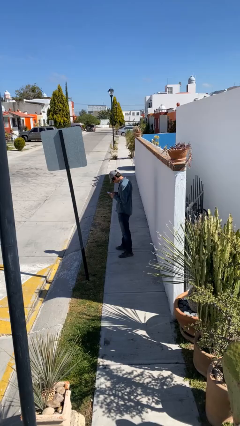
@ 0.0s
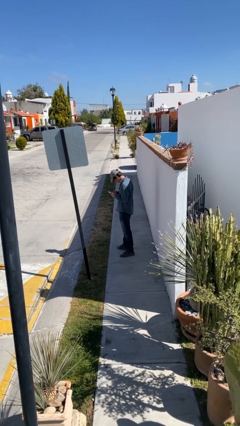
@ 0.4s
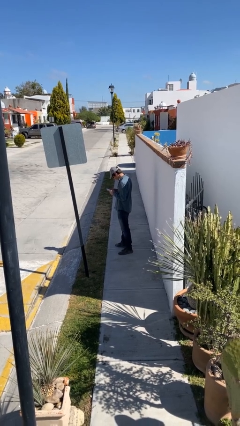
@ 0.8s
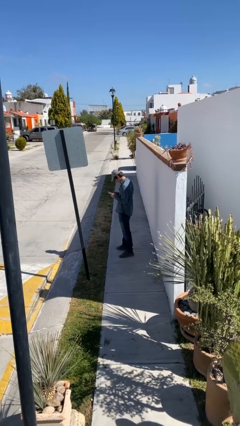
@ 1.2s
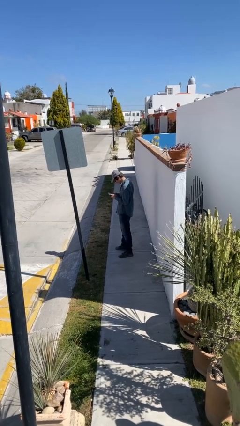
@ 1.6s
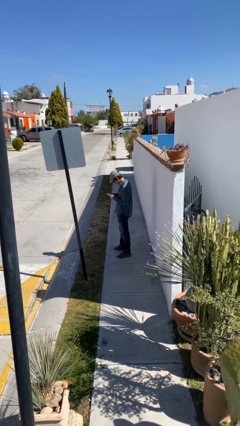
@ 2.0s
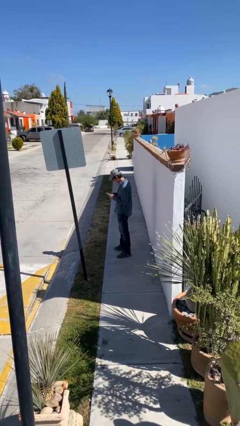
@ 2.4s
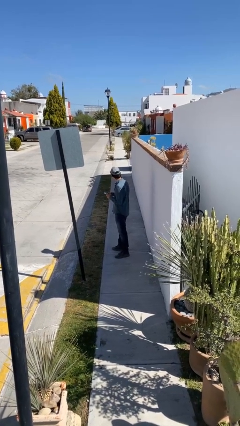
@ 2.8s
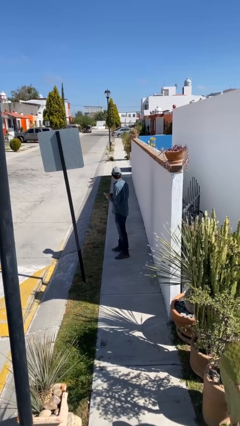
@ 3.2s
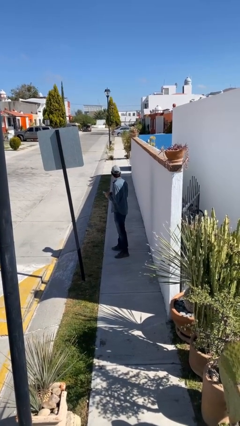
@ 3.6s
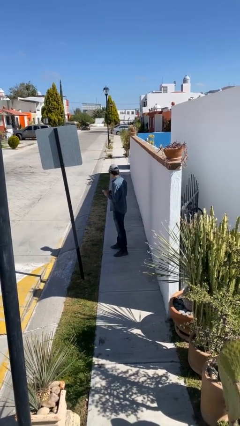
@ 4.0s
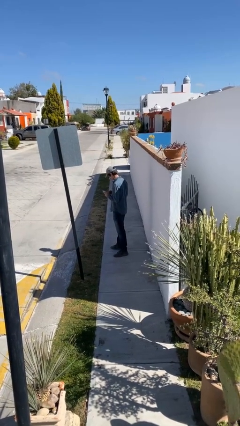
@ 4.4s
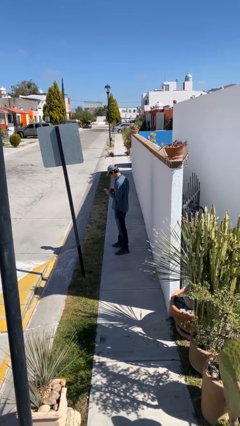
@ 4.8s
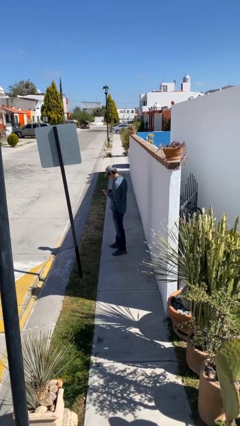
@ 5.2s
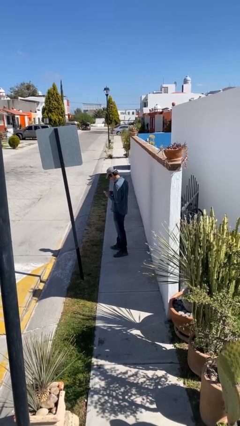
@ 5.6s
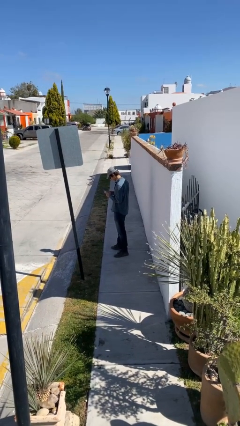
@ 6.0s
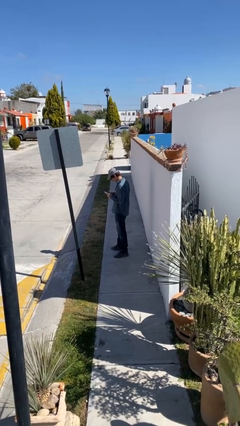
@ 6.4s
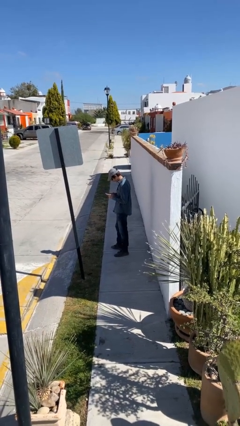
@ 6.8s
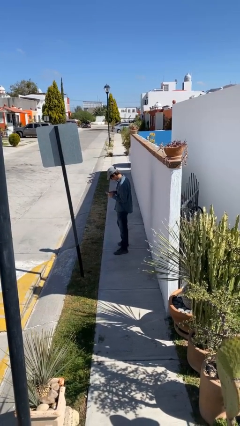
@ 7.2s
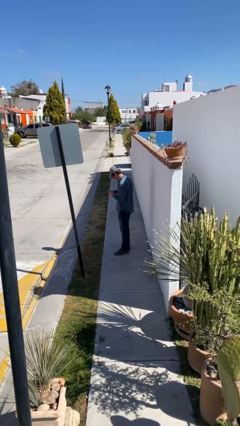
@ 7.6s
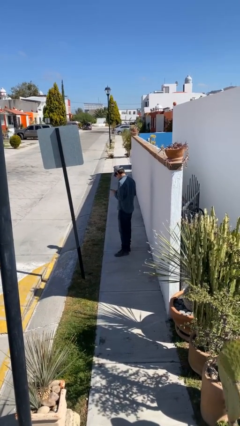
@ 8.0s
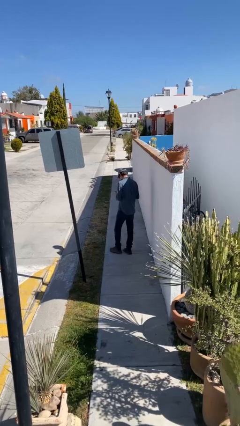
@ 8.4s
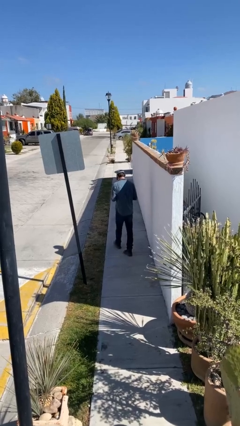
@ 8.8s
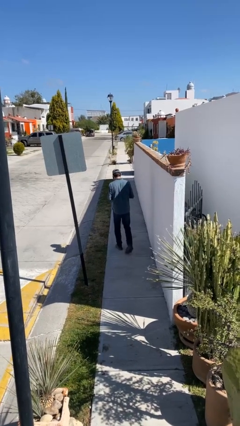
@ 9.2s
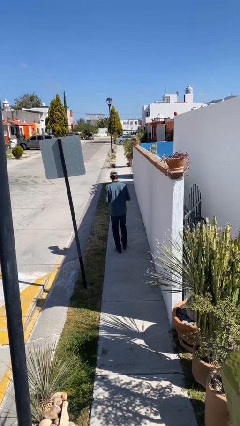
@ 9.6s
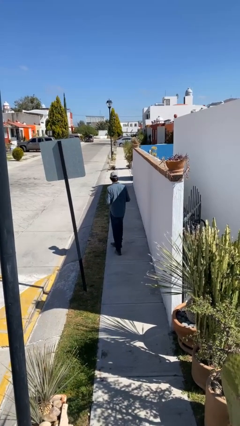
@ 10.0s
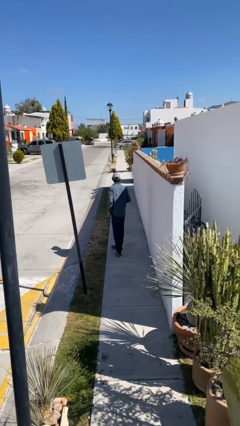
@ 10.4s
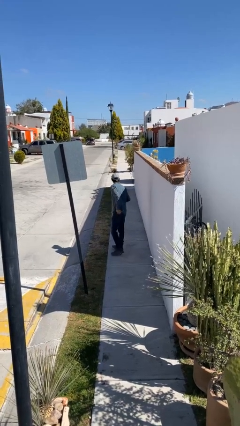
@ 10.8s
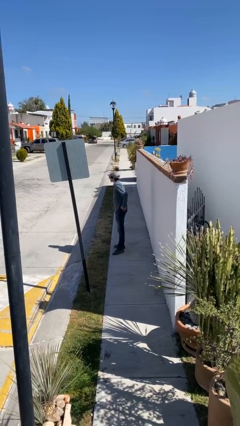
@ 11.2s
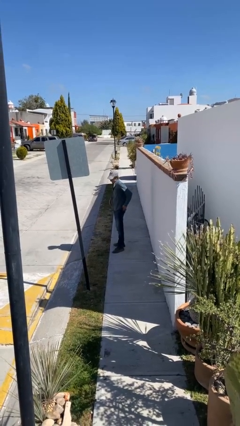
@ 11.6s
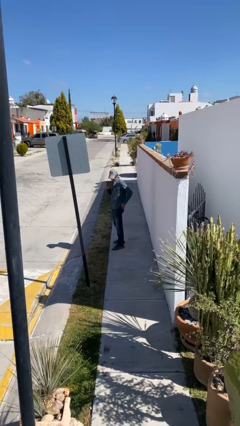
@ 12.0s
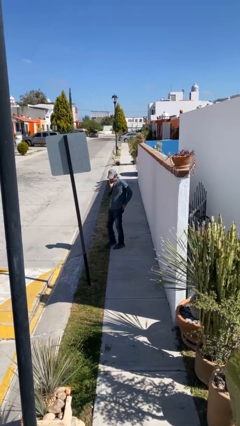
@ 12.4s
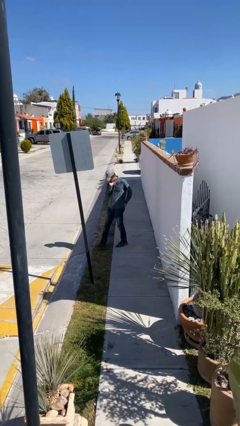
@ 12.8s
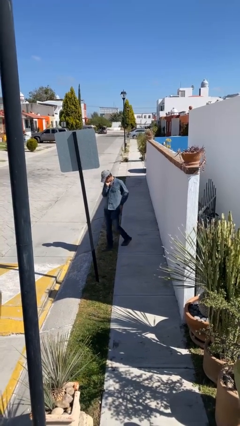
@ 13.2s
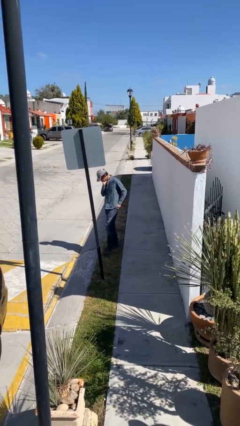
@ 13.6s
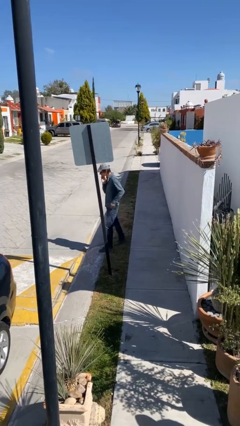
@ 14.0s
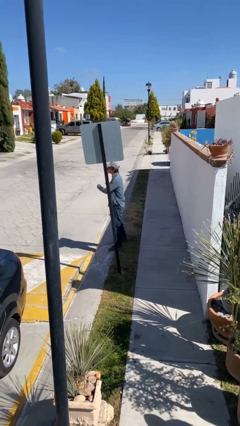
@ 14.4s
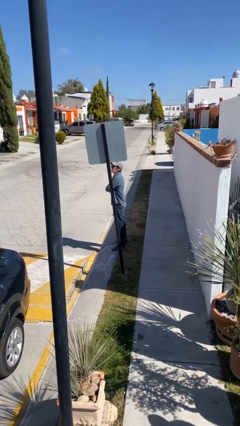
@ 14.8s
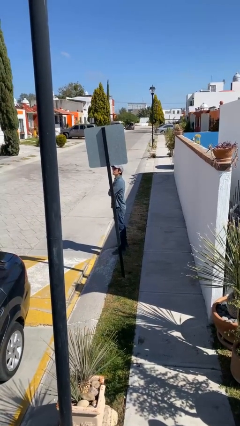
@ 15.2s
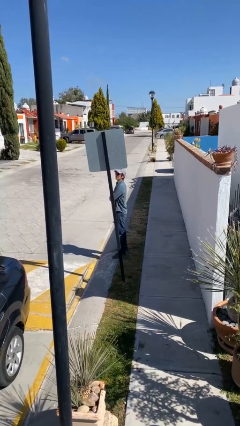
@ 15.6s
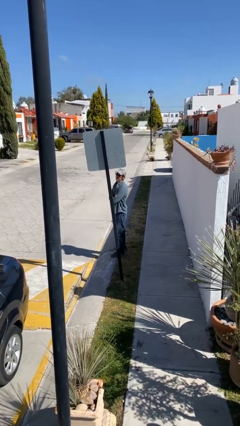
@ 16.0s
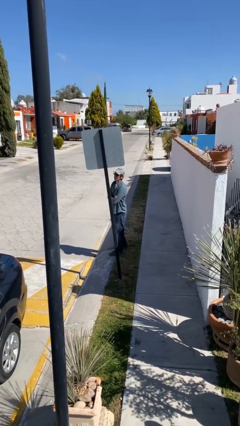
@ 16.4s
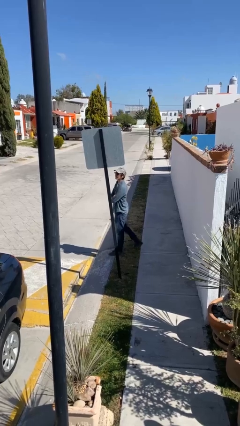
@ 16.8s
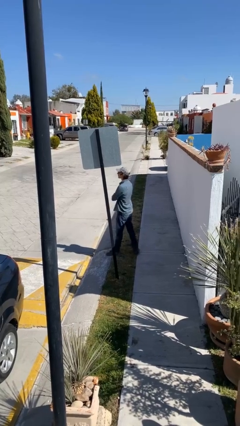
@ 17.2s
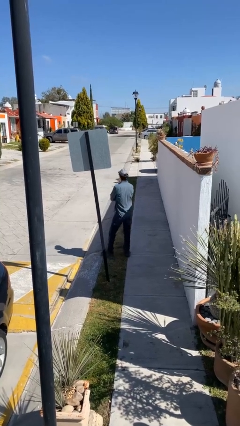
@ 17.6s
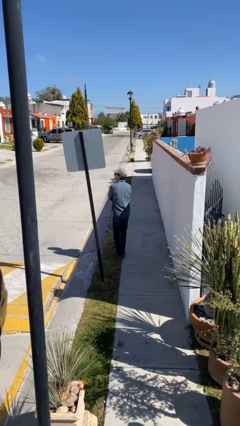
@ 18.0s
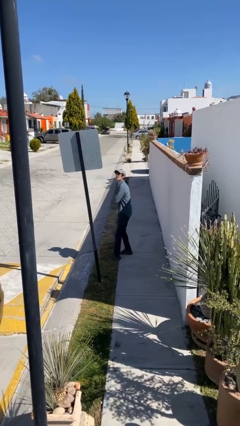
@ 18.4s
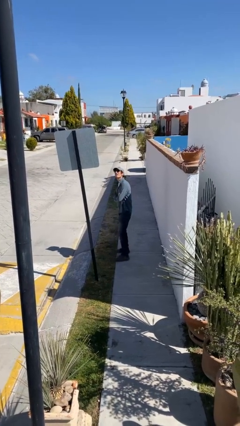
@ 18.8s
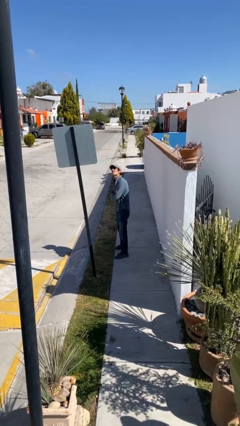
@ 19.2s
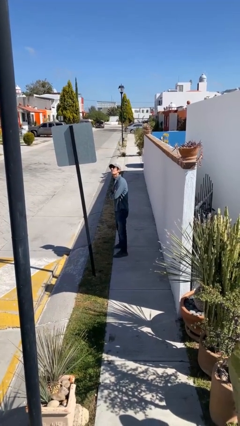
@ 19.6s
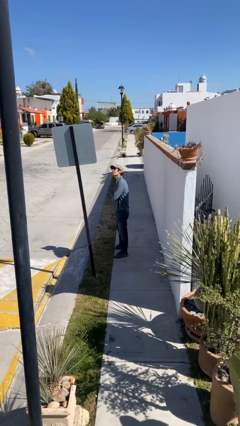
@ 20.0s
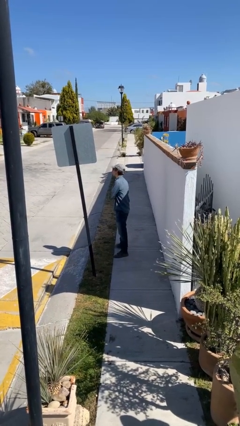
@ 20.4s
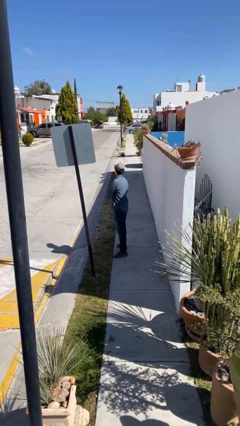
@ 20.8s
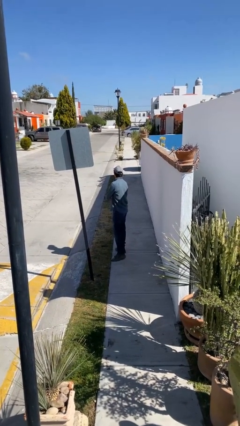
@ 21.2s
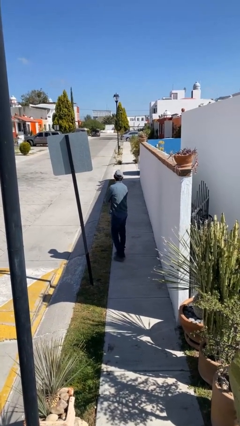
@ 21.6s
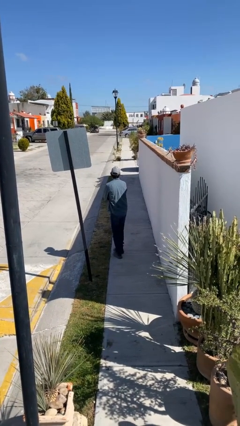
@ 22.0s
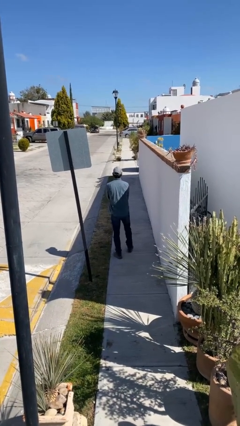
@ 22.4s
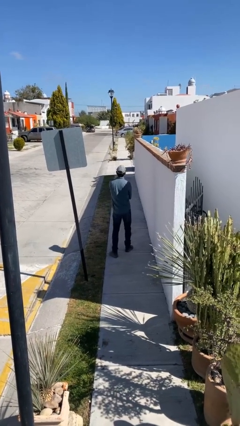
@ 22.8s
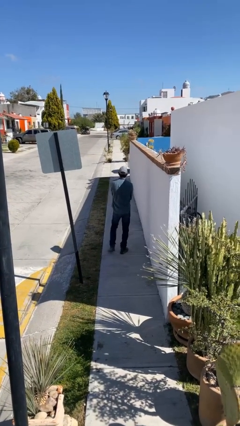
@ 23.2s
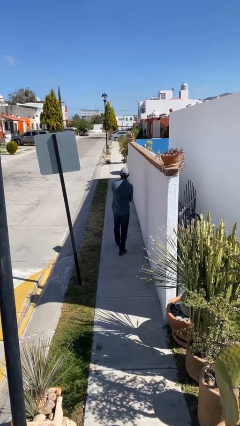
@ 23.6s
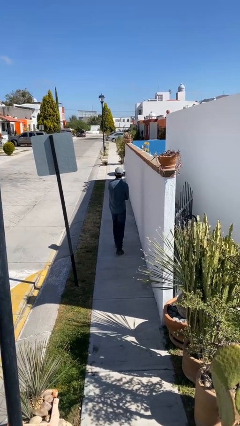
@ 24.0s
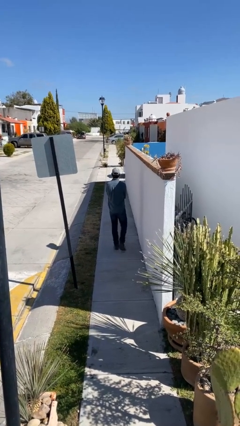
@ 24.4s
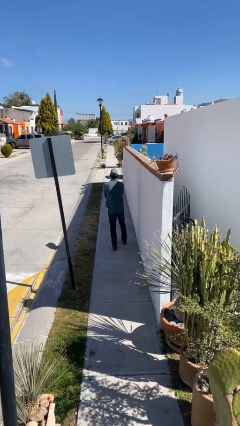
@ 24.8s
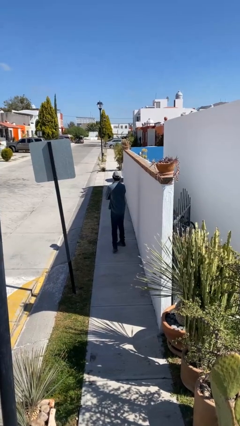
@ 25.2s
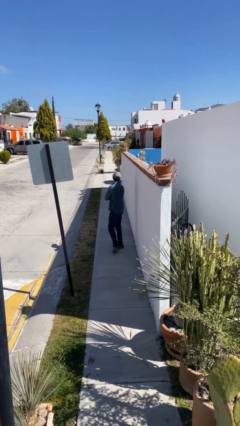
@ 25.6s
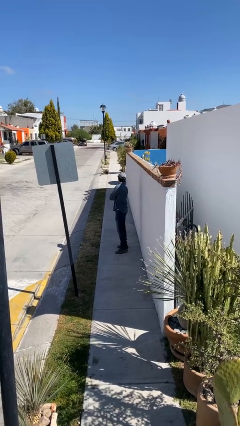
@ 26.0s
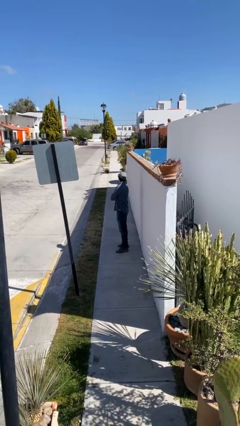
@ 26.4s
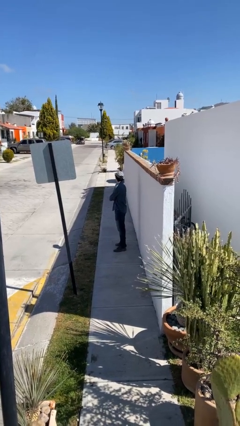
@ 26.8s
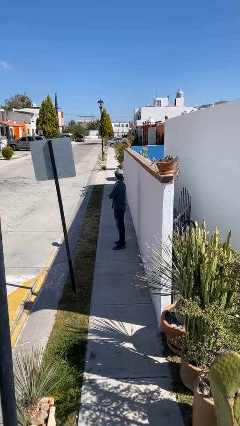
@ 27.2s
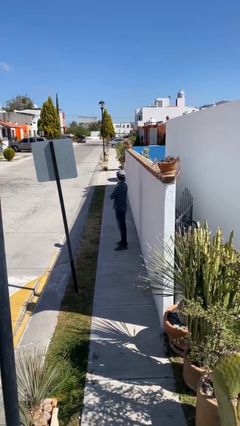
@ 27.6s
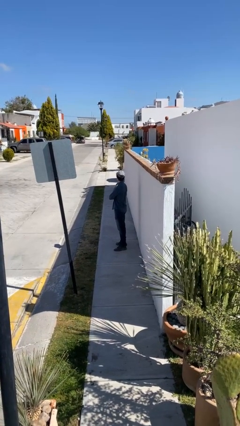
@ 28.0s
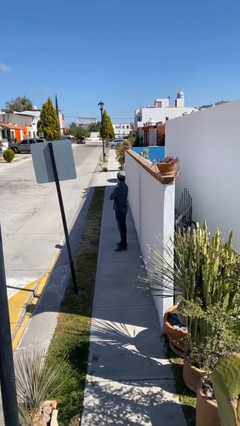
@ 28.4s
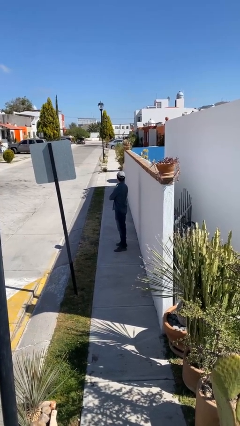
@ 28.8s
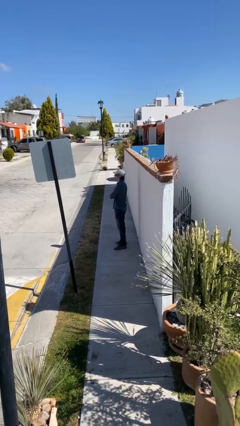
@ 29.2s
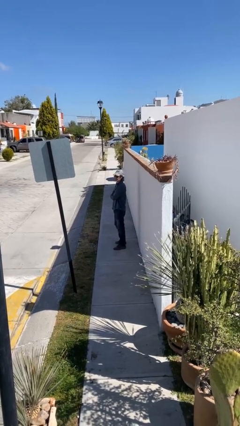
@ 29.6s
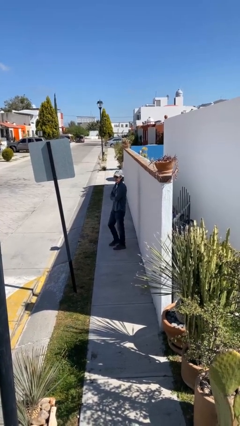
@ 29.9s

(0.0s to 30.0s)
person walks

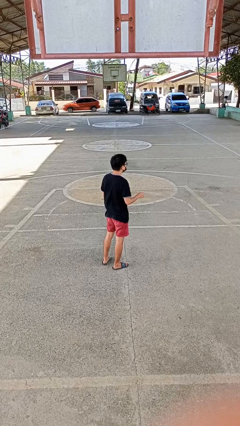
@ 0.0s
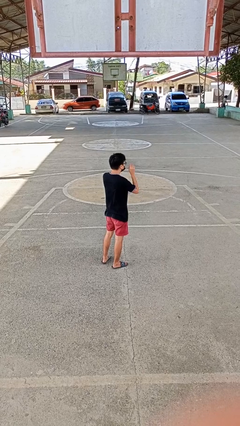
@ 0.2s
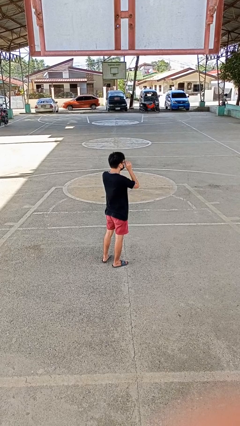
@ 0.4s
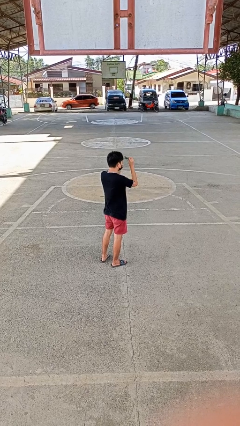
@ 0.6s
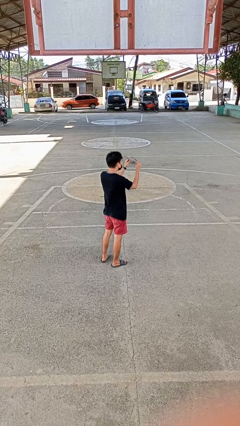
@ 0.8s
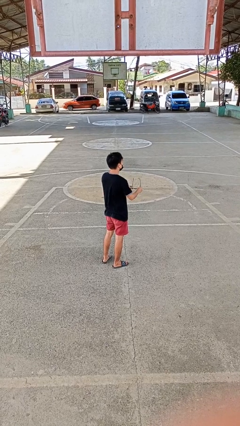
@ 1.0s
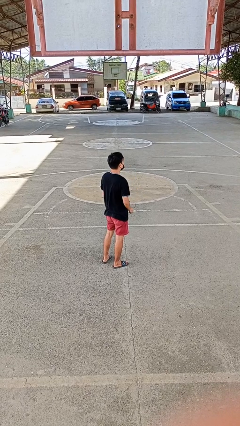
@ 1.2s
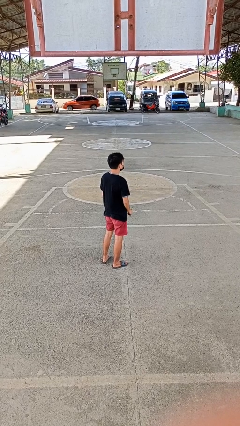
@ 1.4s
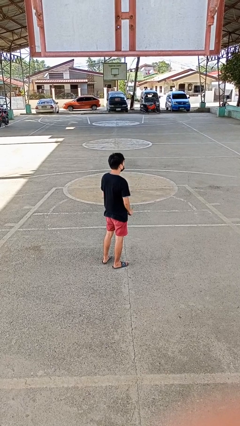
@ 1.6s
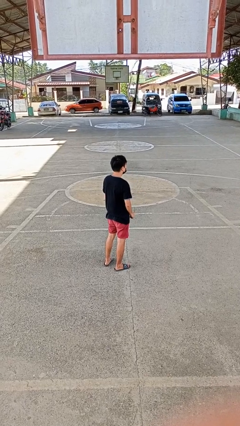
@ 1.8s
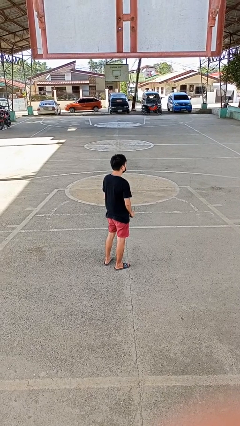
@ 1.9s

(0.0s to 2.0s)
person takes off glasses

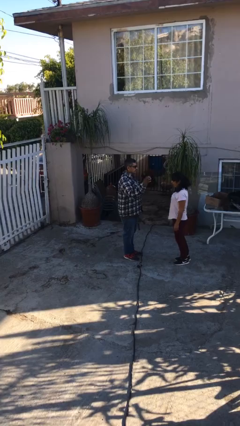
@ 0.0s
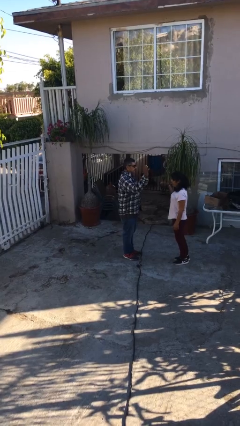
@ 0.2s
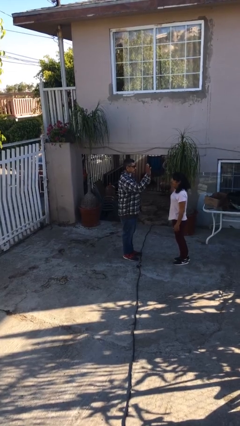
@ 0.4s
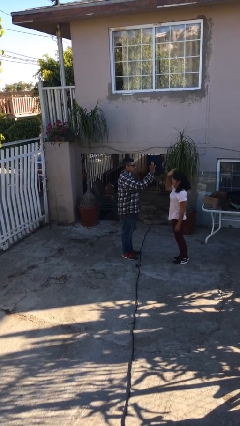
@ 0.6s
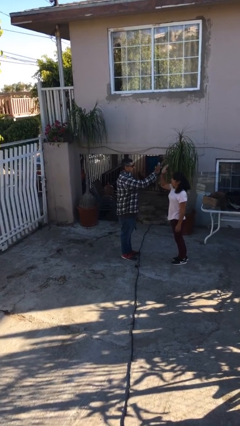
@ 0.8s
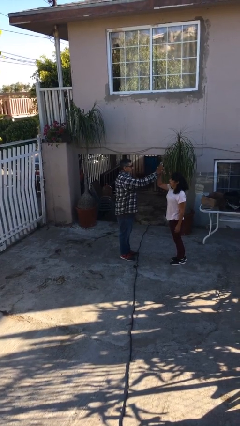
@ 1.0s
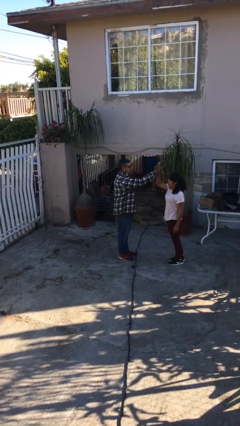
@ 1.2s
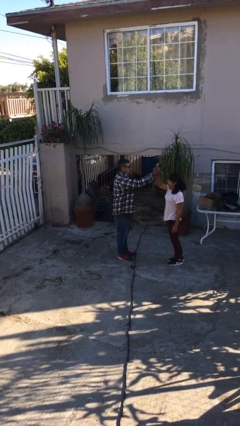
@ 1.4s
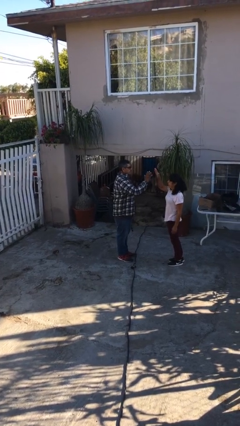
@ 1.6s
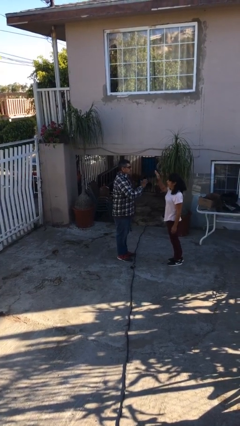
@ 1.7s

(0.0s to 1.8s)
person highfives hand
